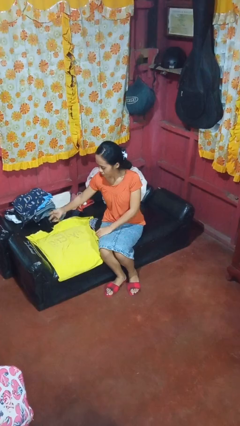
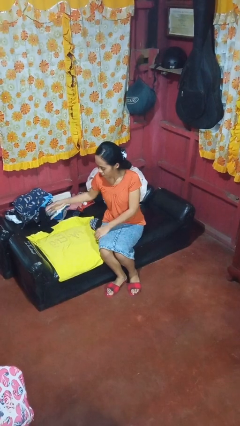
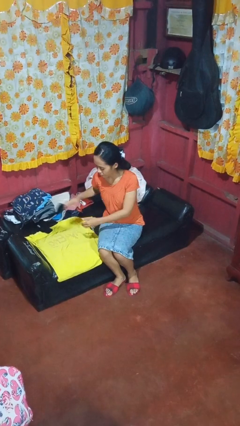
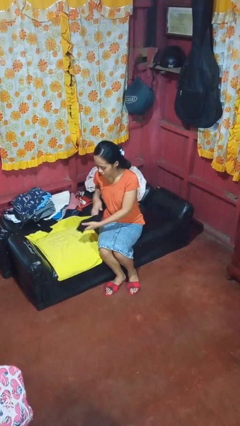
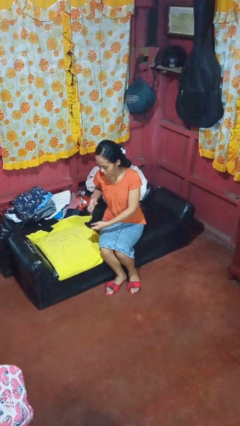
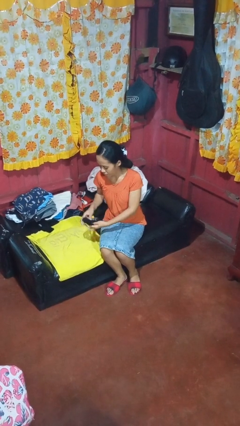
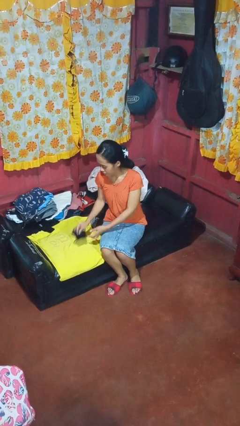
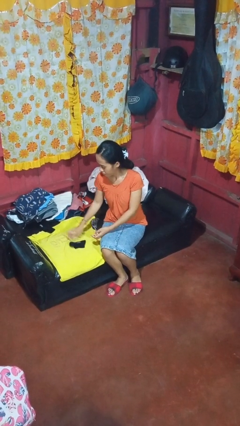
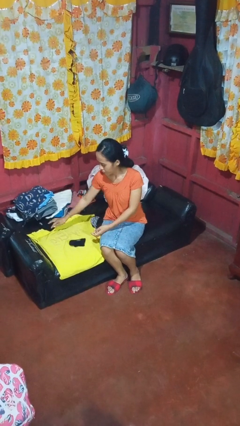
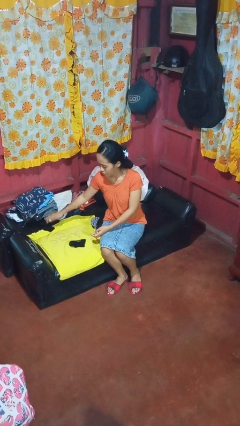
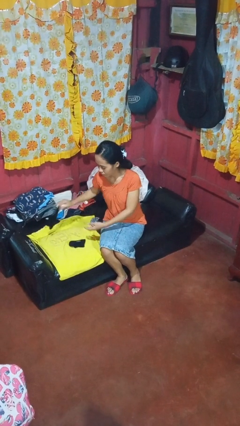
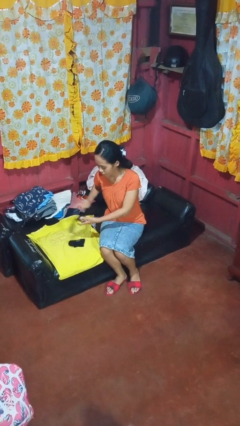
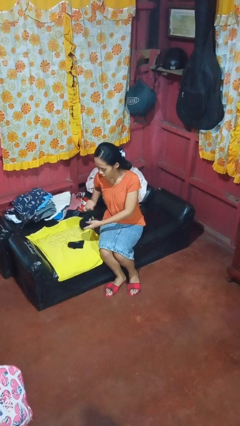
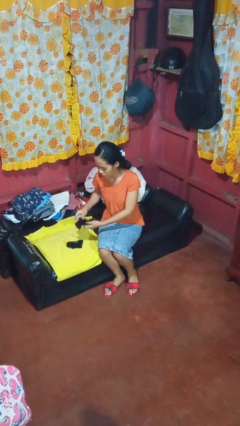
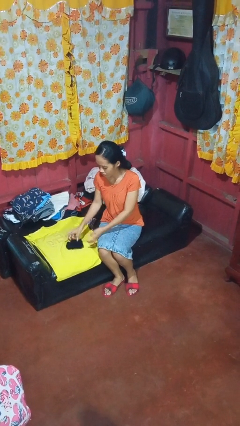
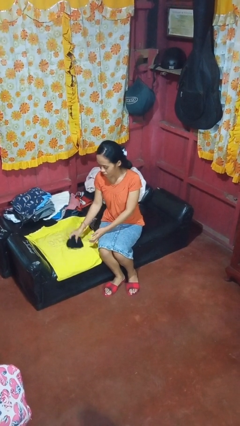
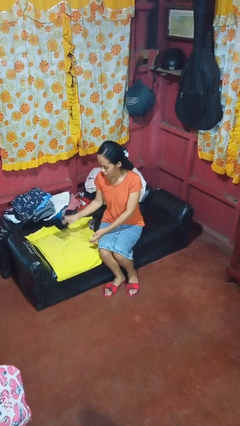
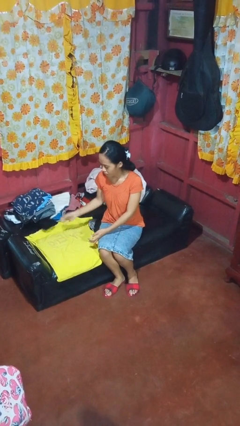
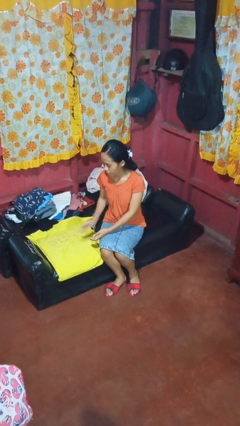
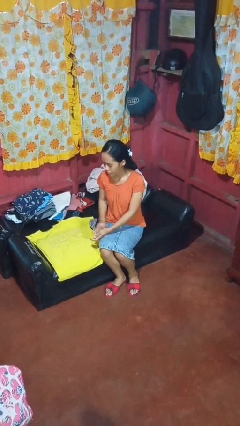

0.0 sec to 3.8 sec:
person folds socks

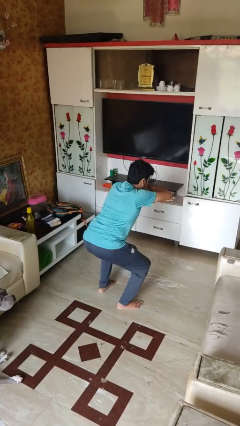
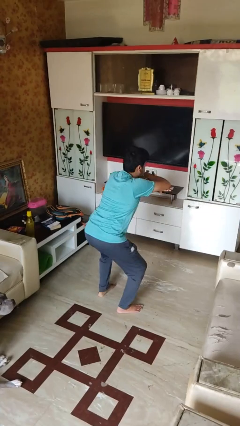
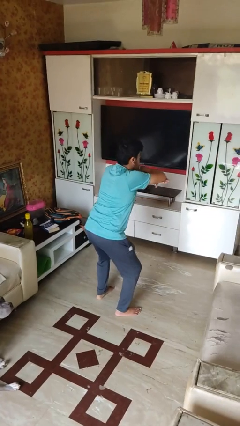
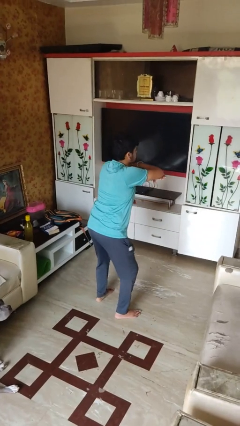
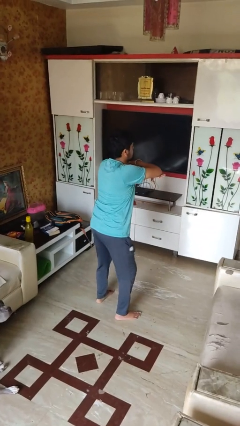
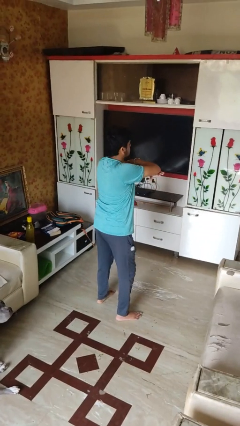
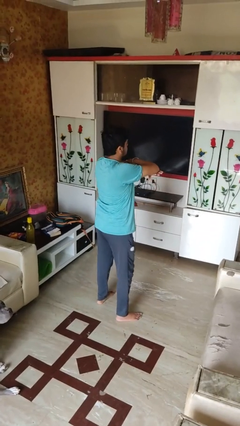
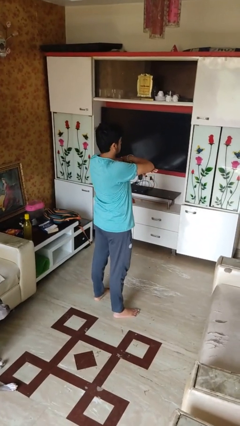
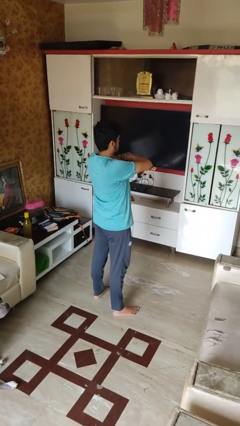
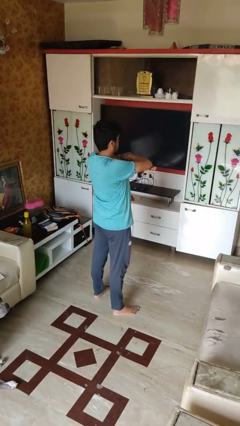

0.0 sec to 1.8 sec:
person stands up

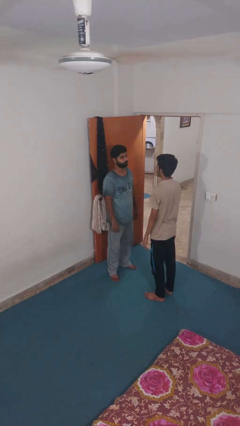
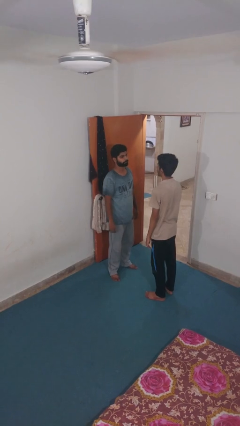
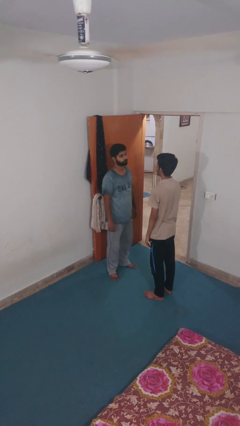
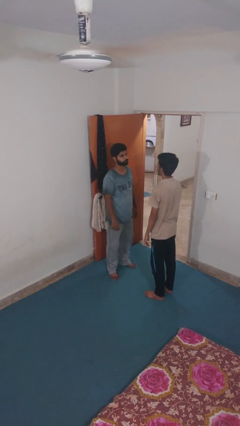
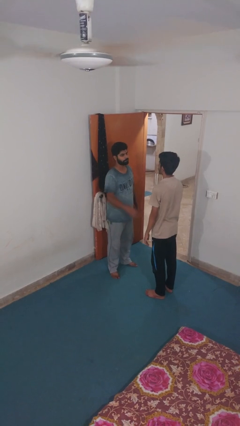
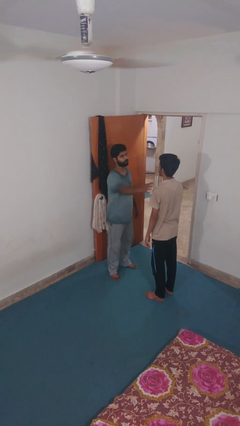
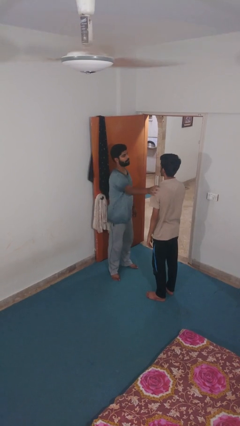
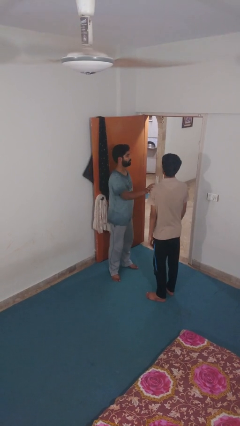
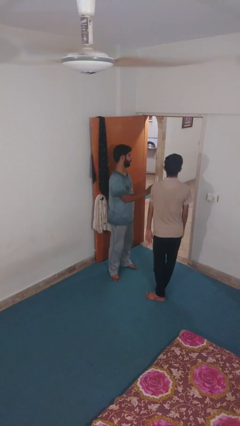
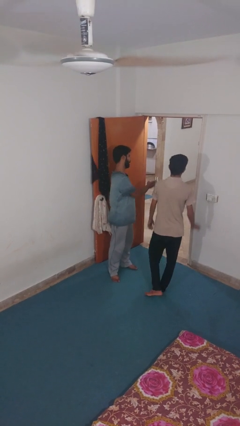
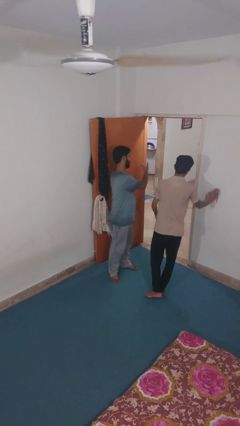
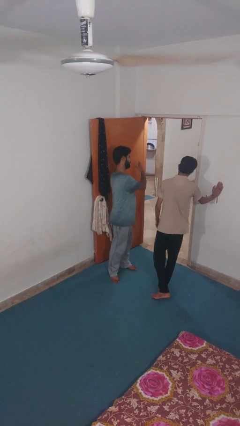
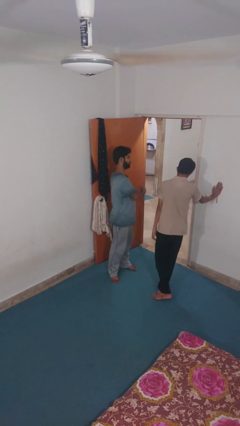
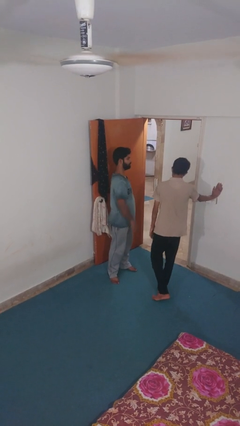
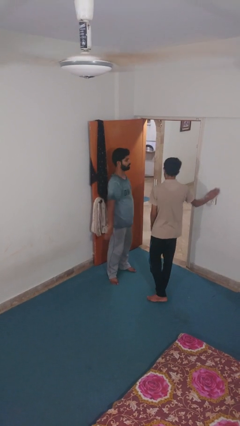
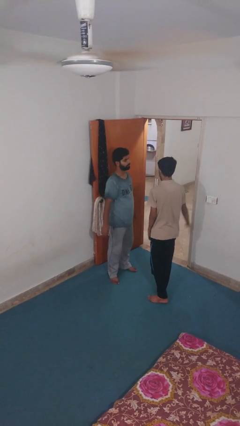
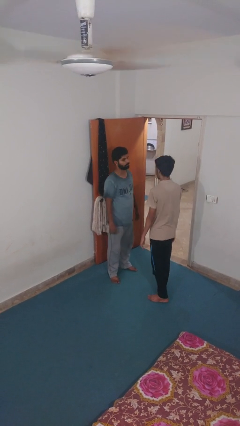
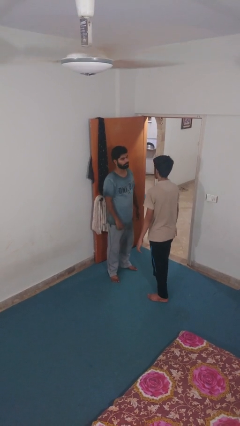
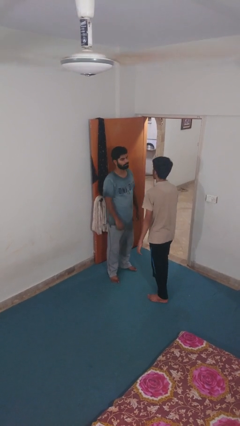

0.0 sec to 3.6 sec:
person shoves person

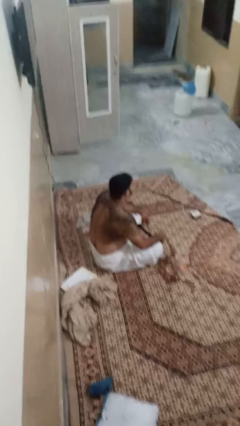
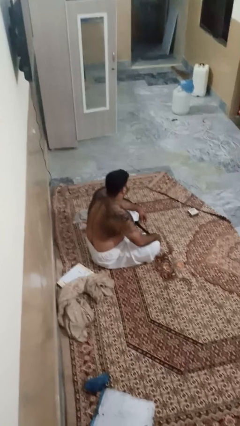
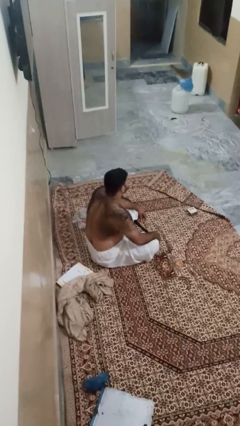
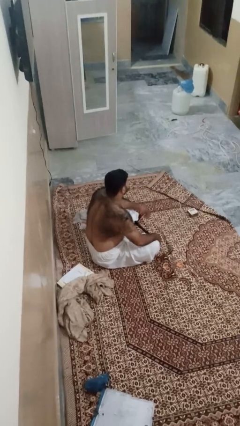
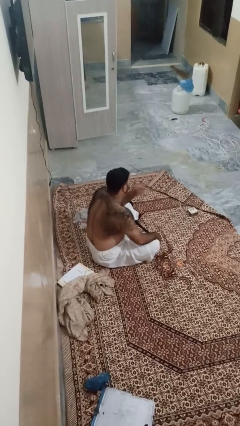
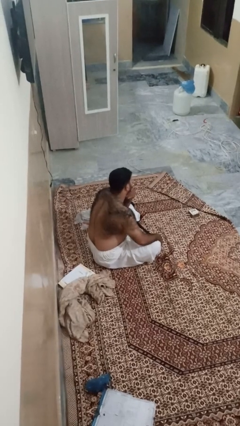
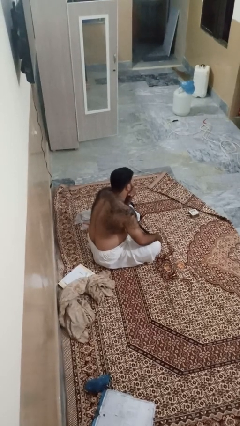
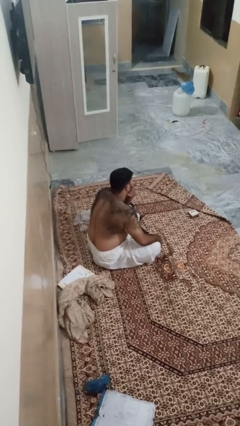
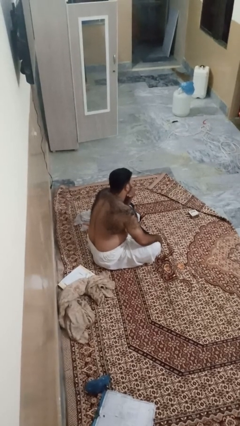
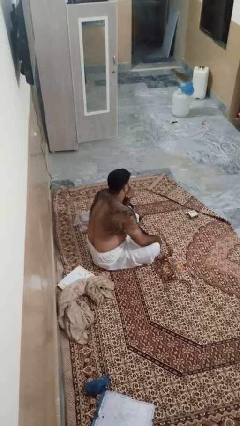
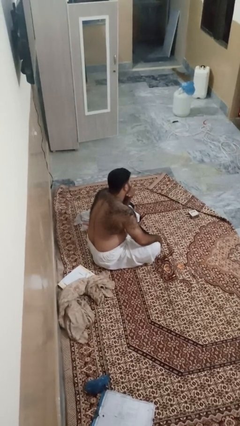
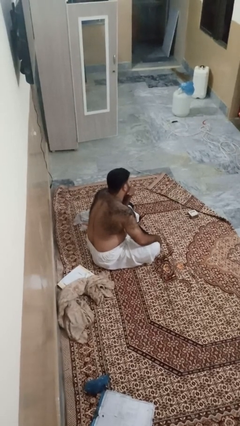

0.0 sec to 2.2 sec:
person strokes chin

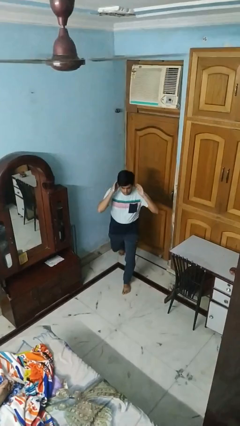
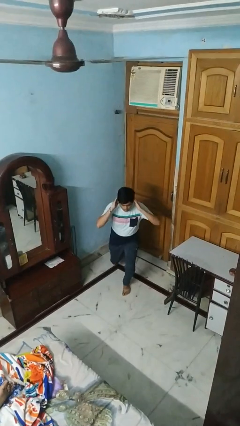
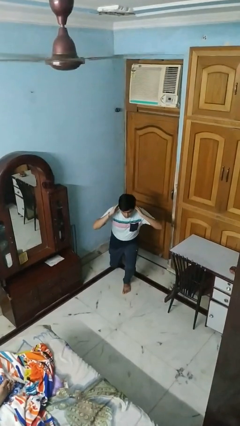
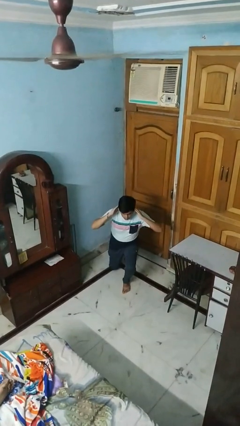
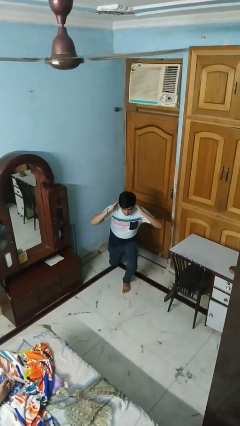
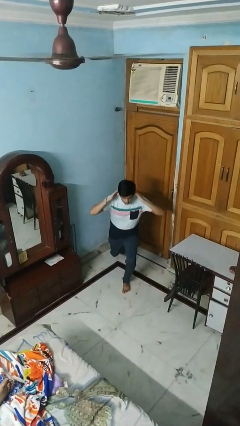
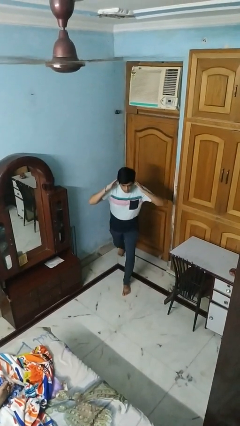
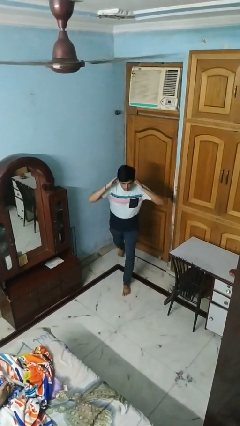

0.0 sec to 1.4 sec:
person exercises with lunges

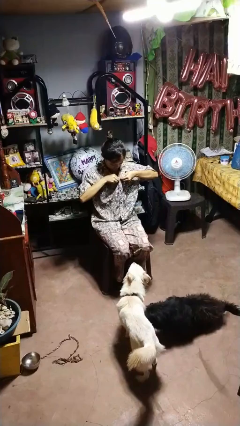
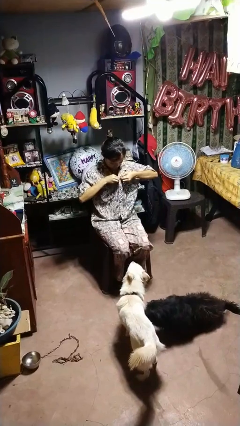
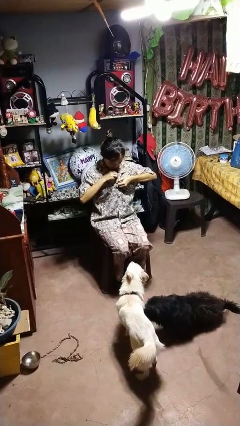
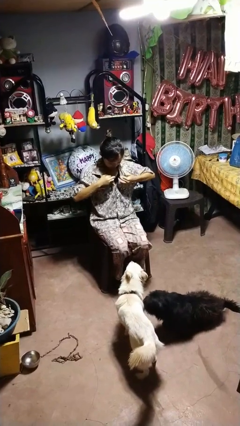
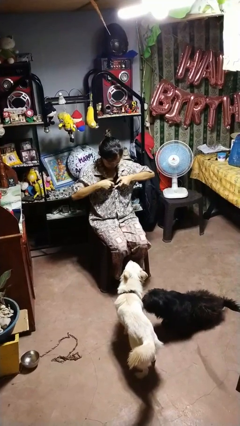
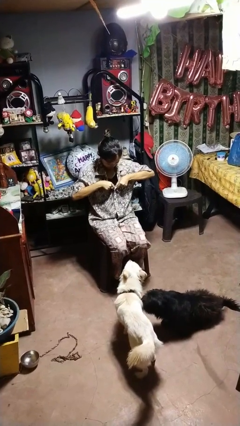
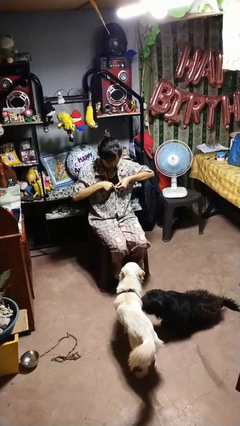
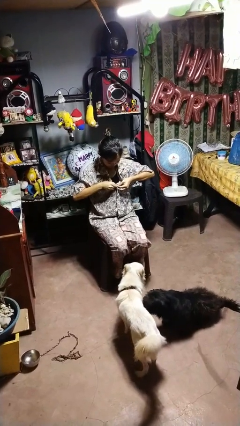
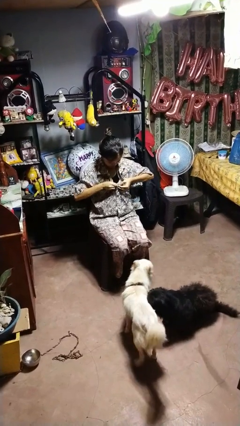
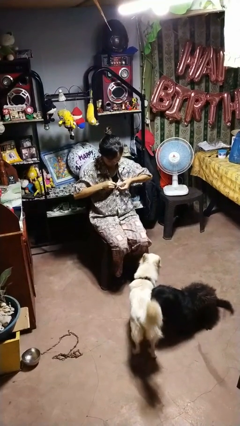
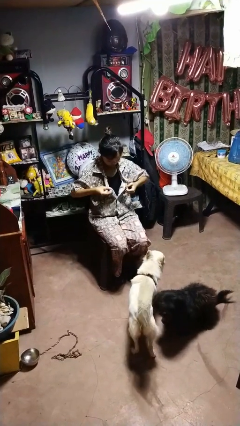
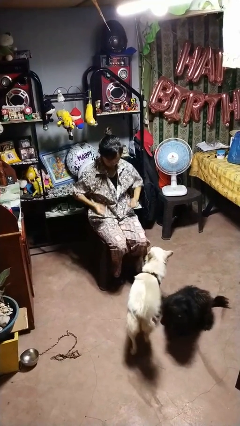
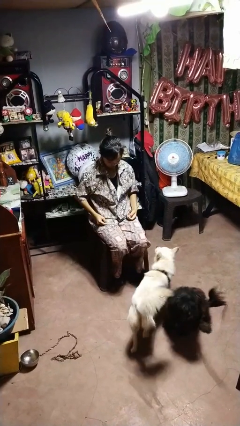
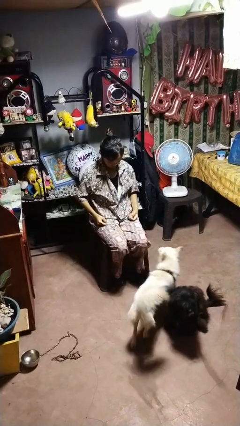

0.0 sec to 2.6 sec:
person unbuttons shirt

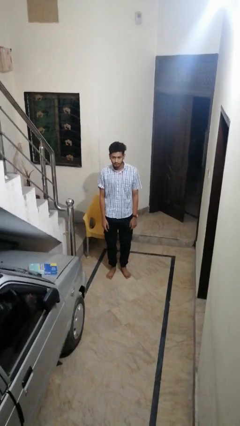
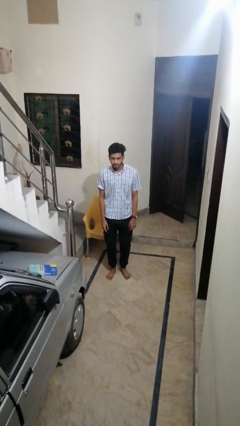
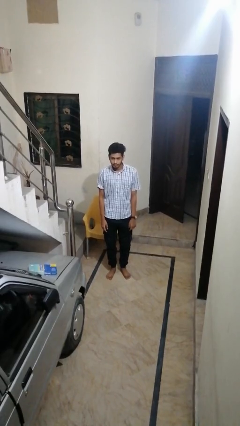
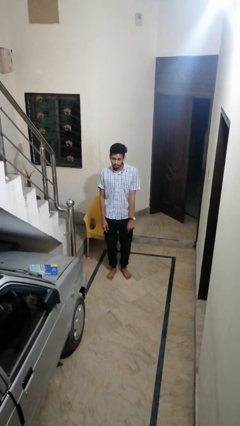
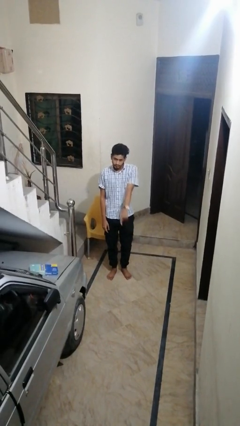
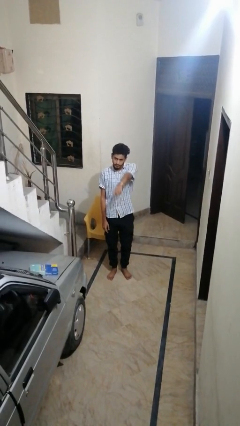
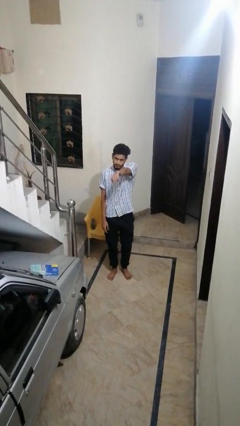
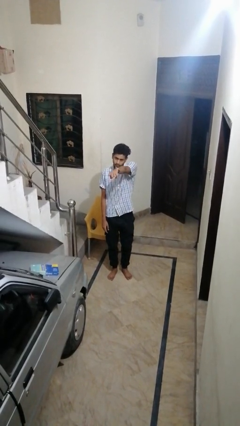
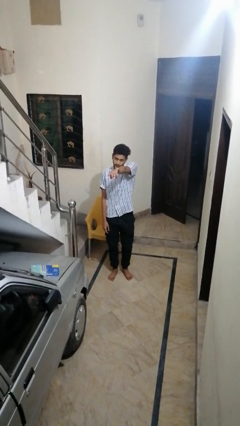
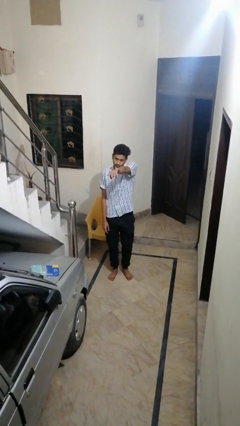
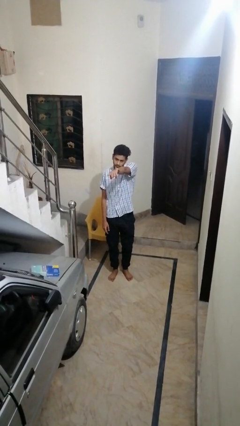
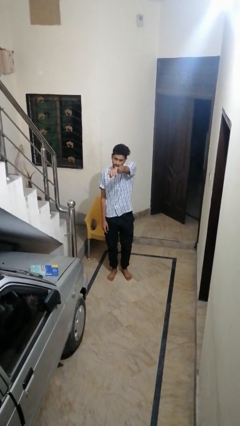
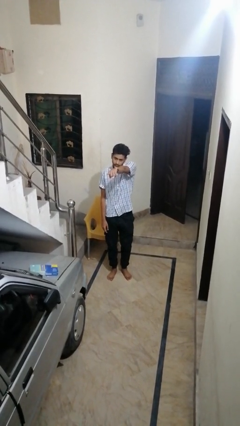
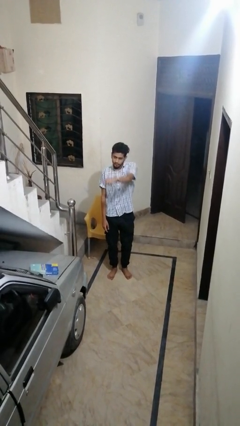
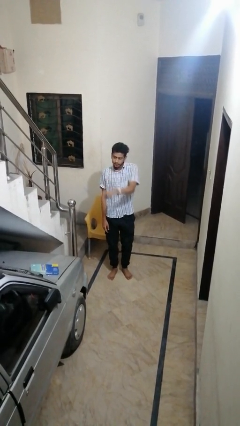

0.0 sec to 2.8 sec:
person points at person
